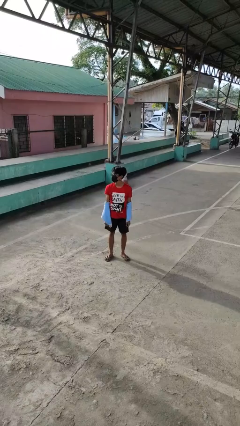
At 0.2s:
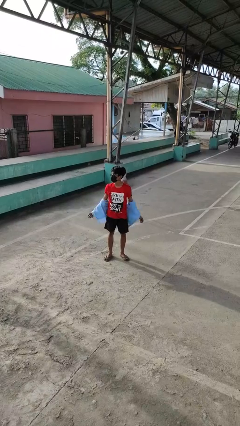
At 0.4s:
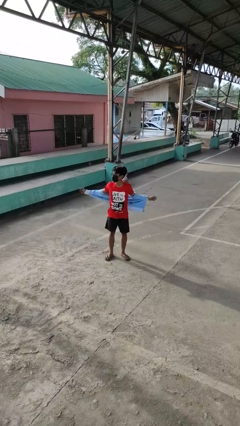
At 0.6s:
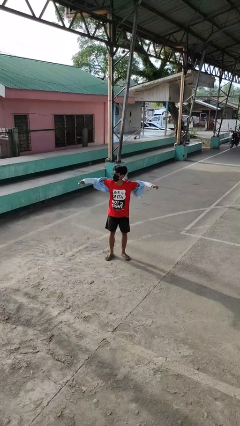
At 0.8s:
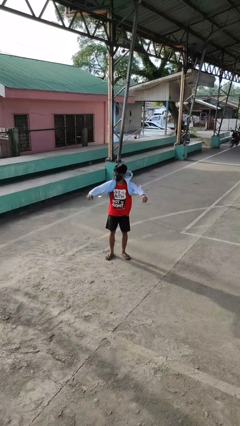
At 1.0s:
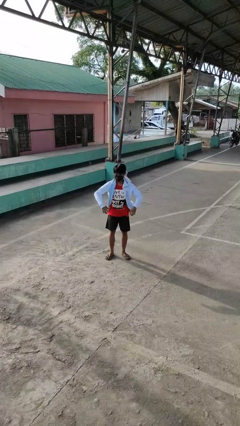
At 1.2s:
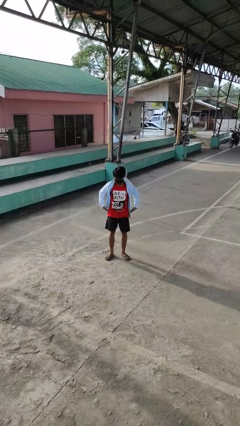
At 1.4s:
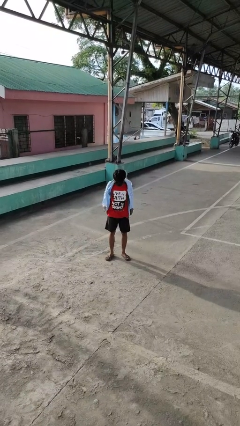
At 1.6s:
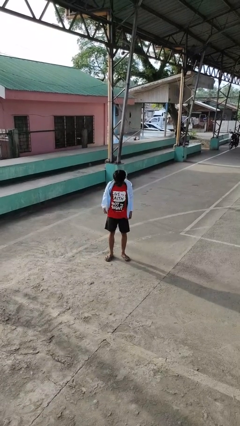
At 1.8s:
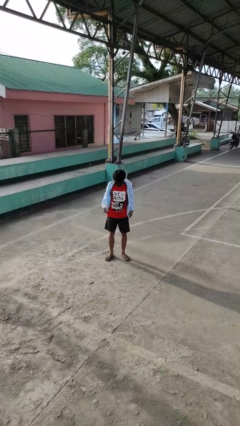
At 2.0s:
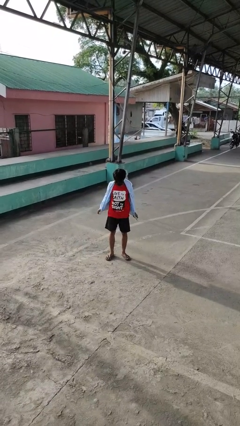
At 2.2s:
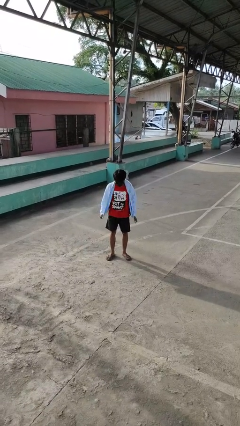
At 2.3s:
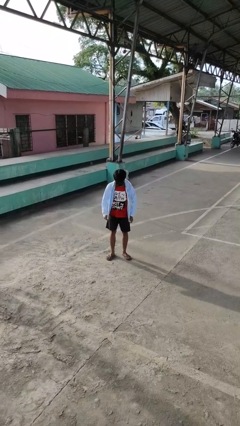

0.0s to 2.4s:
person puts on jacket

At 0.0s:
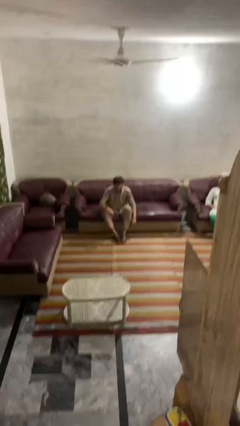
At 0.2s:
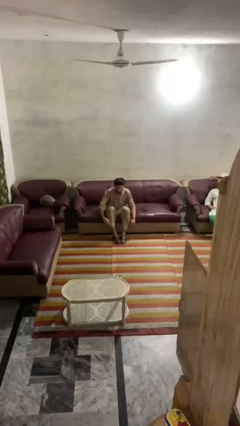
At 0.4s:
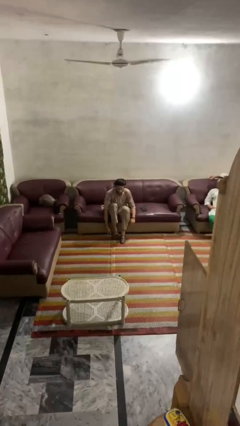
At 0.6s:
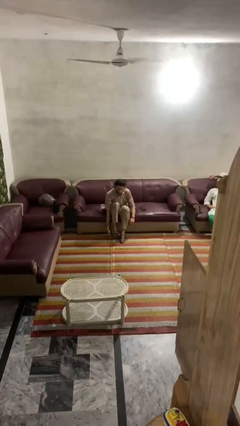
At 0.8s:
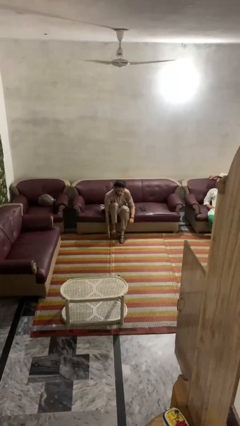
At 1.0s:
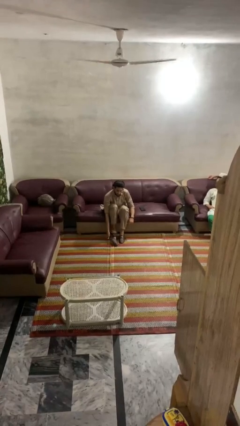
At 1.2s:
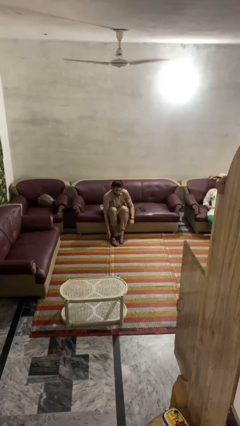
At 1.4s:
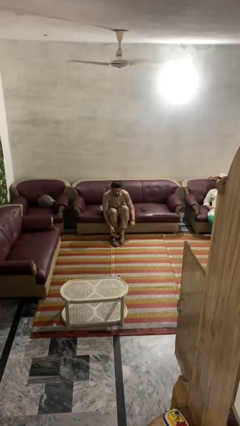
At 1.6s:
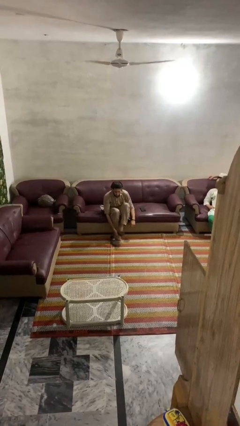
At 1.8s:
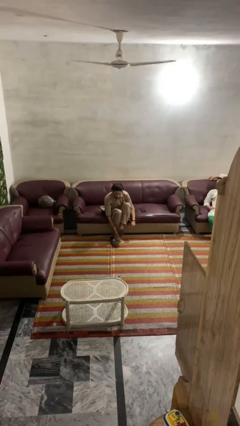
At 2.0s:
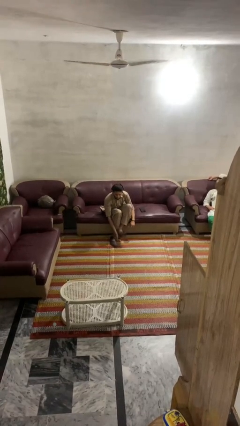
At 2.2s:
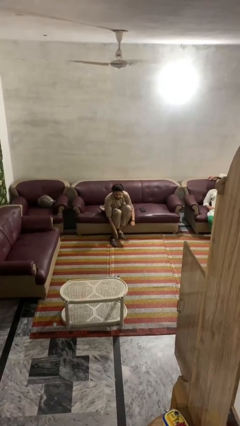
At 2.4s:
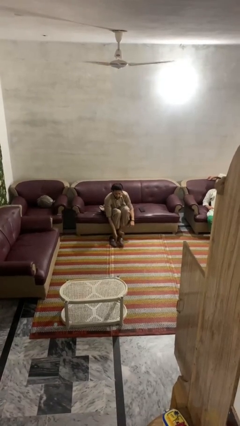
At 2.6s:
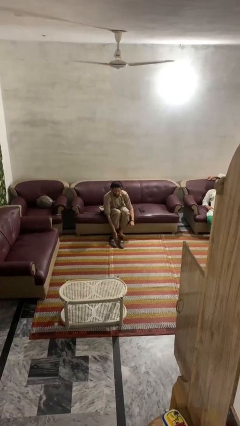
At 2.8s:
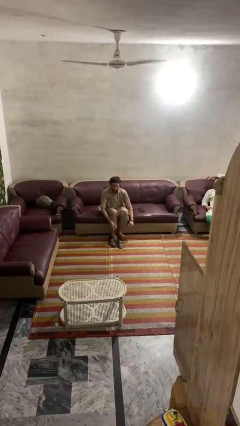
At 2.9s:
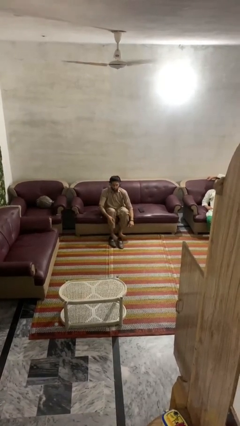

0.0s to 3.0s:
person takes off shoes

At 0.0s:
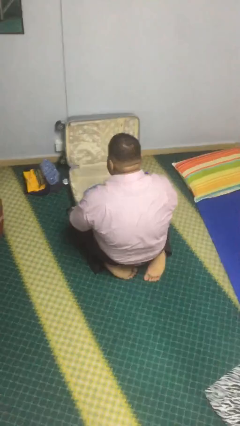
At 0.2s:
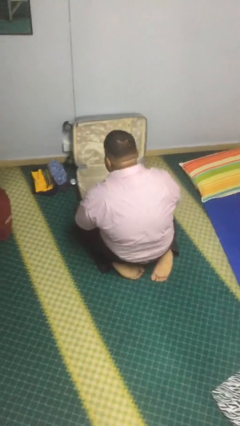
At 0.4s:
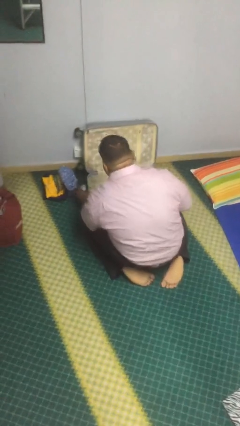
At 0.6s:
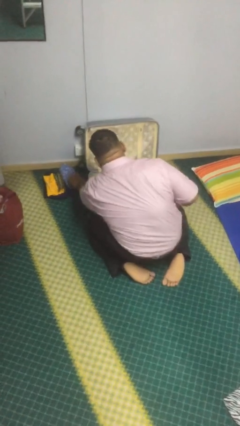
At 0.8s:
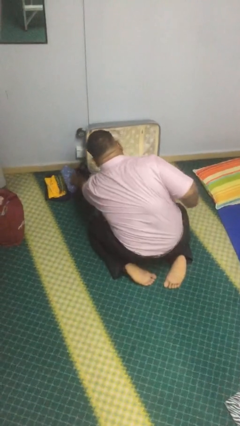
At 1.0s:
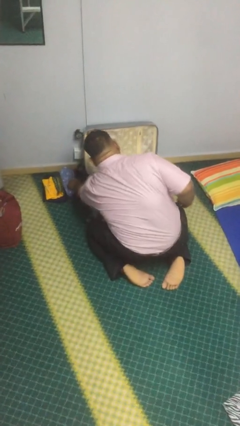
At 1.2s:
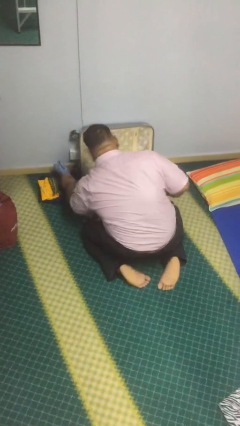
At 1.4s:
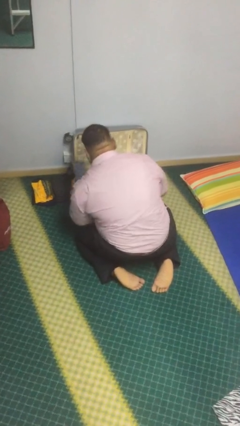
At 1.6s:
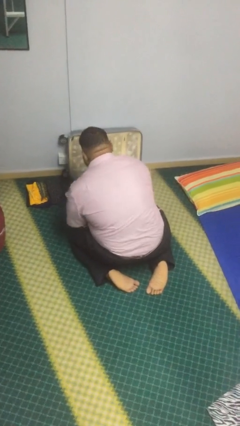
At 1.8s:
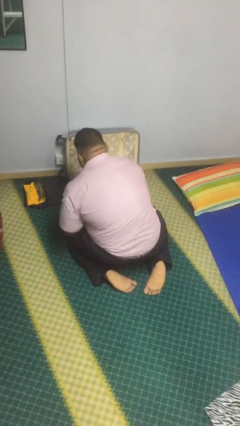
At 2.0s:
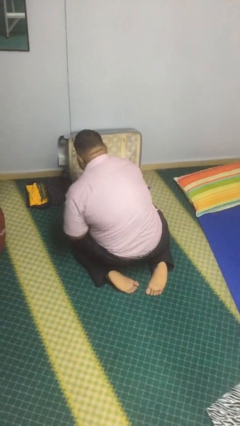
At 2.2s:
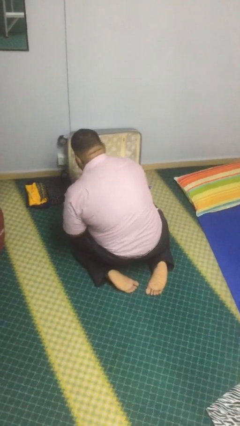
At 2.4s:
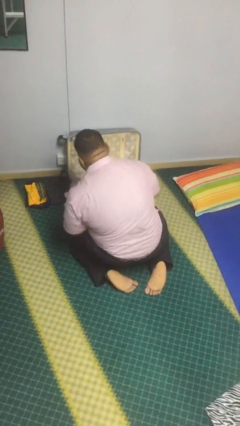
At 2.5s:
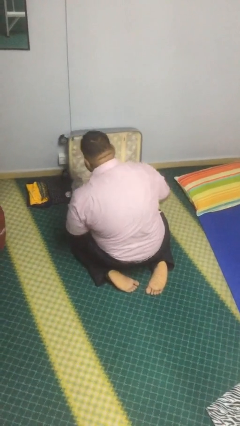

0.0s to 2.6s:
person loads clothes into suitcase

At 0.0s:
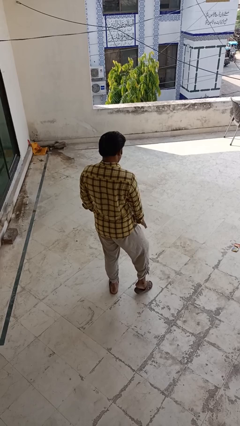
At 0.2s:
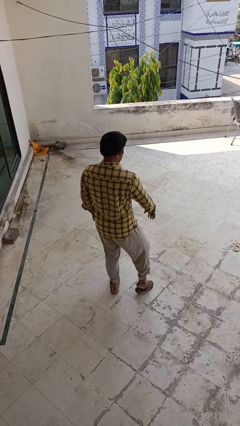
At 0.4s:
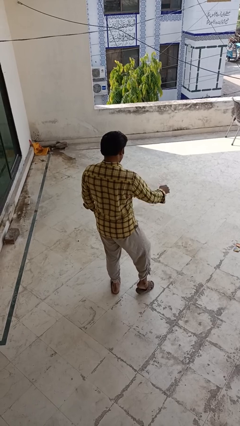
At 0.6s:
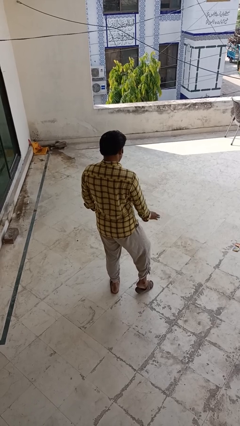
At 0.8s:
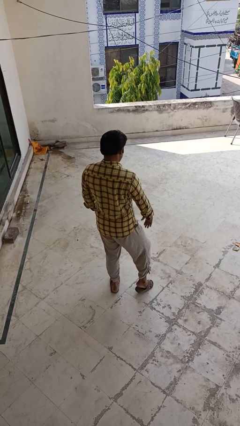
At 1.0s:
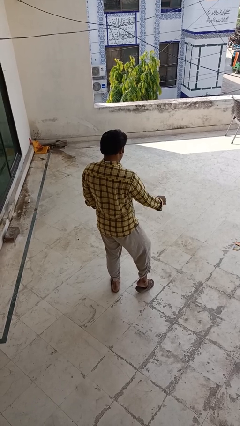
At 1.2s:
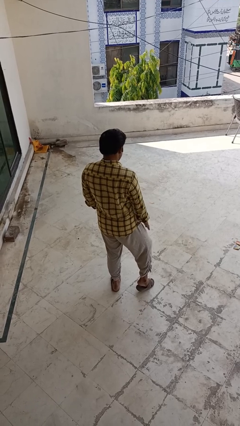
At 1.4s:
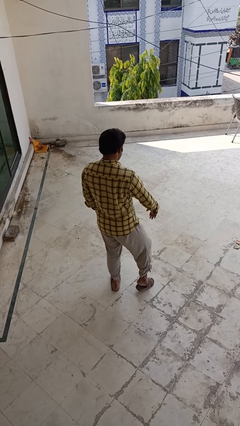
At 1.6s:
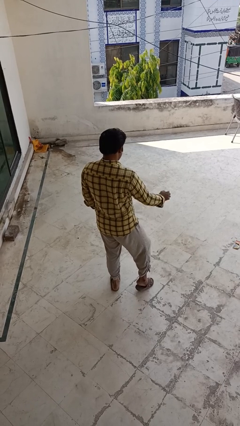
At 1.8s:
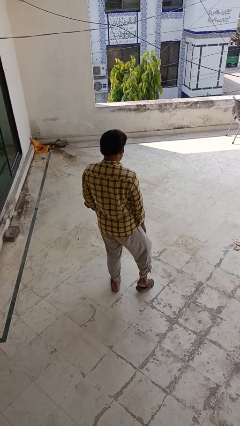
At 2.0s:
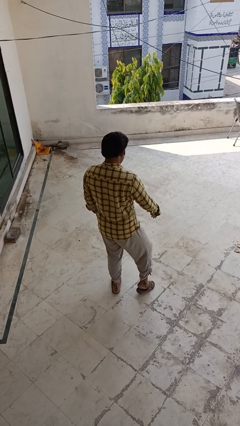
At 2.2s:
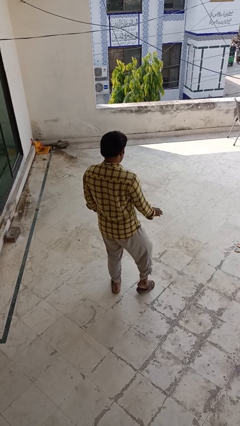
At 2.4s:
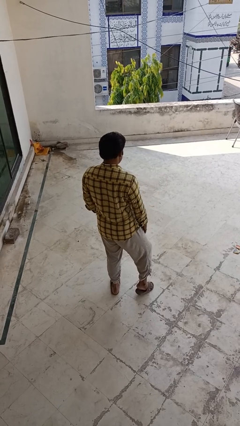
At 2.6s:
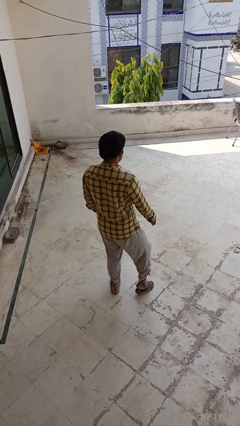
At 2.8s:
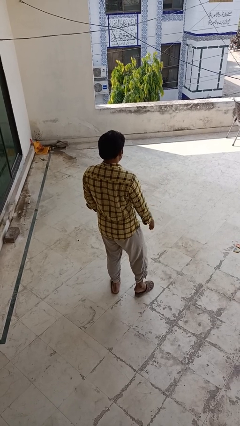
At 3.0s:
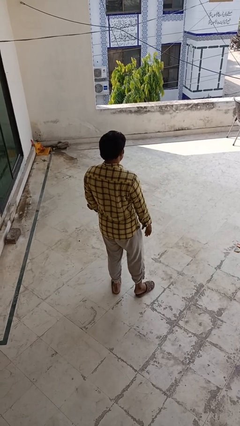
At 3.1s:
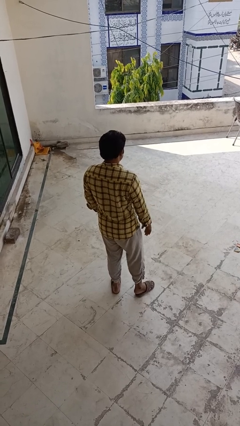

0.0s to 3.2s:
person slaps hands on thighs

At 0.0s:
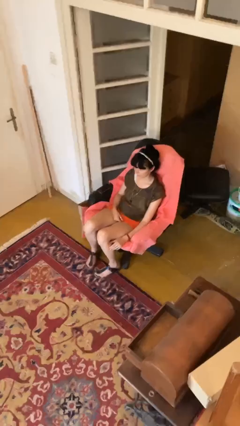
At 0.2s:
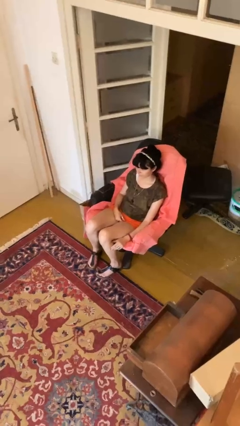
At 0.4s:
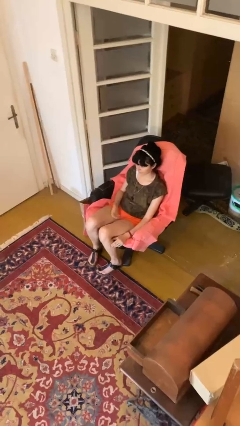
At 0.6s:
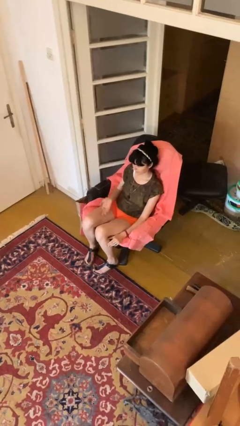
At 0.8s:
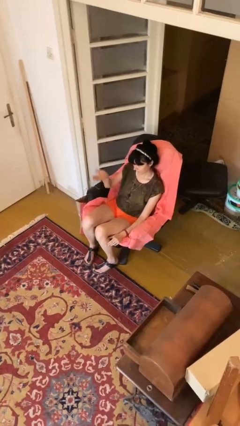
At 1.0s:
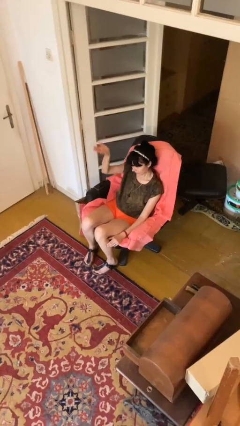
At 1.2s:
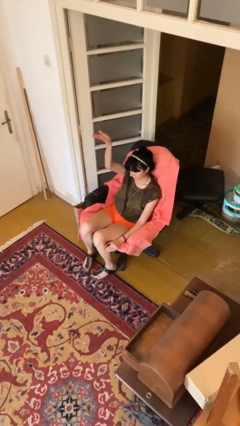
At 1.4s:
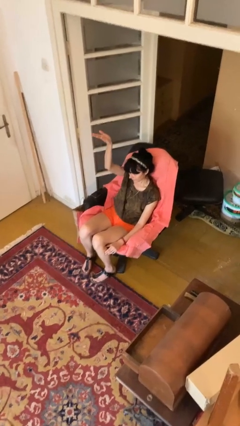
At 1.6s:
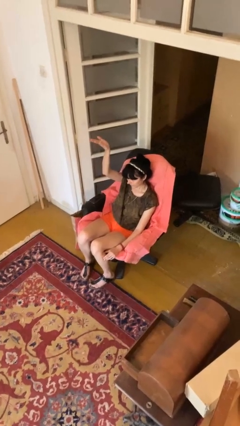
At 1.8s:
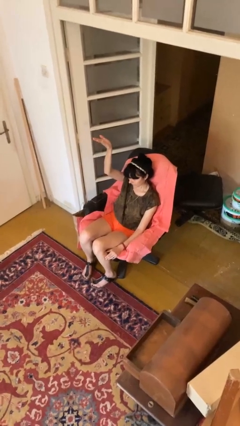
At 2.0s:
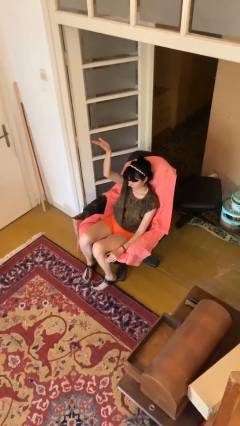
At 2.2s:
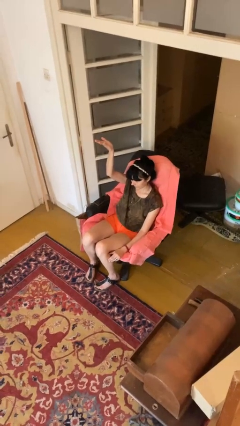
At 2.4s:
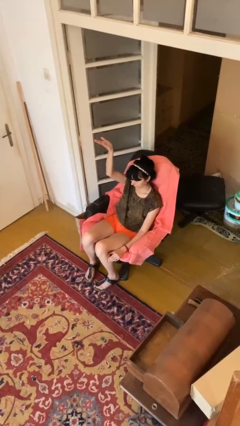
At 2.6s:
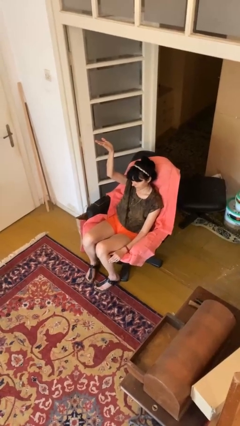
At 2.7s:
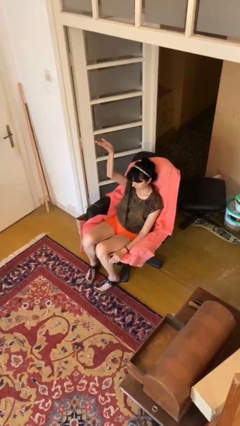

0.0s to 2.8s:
person gestures swipe up

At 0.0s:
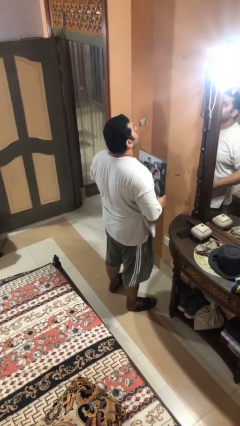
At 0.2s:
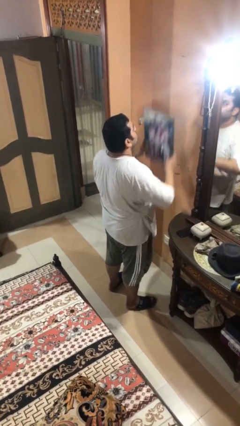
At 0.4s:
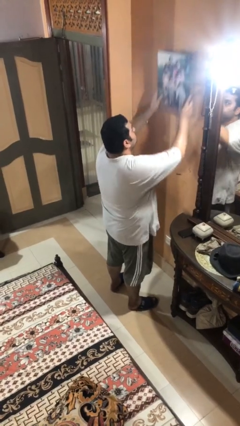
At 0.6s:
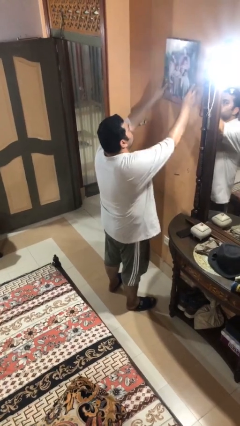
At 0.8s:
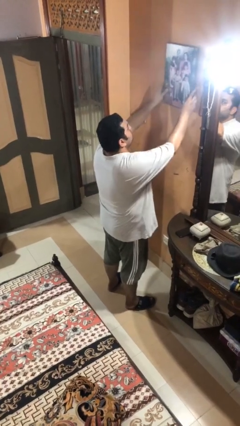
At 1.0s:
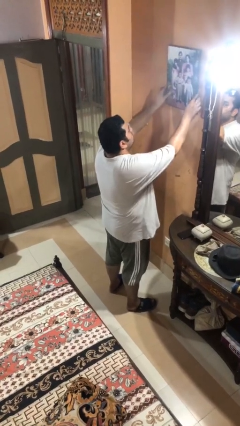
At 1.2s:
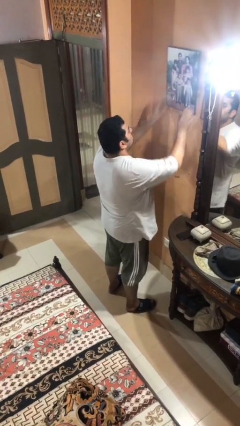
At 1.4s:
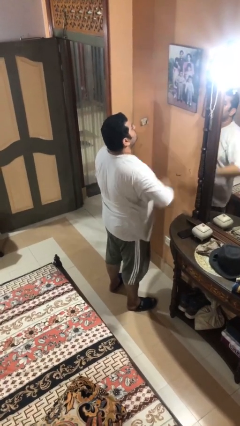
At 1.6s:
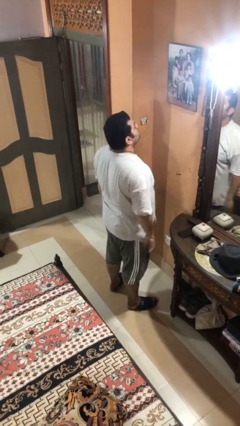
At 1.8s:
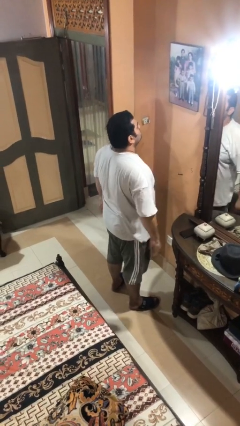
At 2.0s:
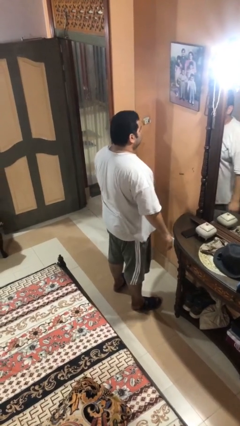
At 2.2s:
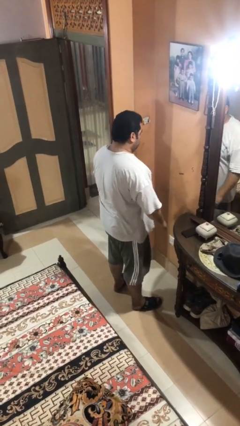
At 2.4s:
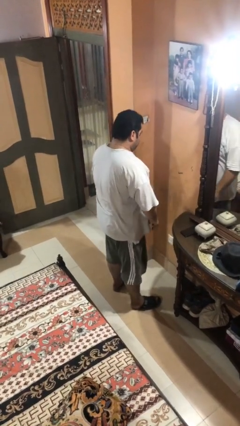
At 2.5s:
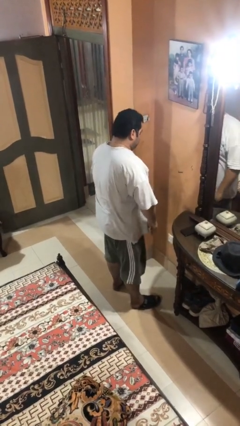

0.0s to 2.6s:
person puts up picture frame

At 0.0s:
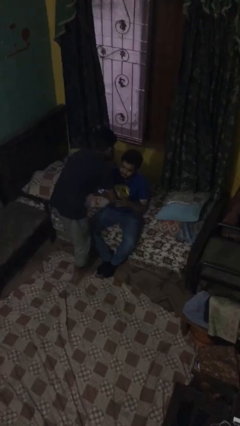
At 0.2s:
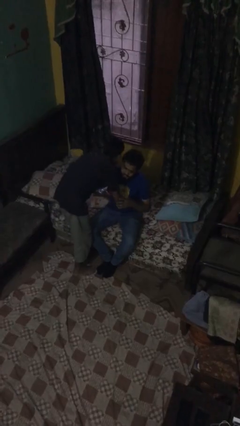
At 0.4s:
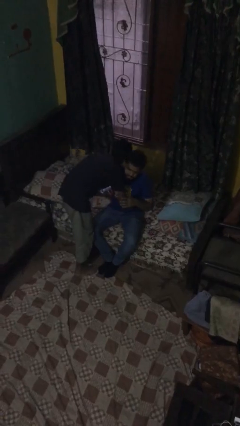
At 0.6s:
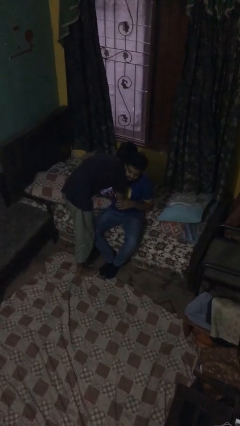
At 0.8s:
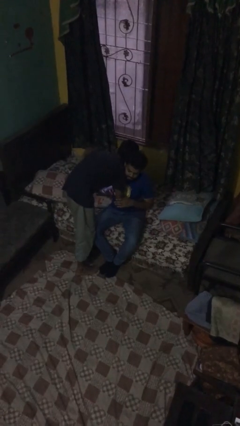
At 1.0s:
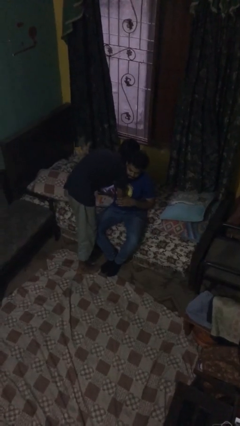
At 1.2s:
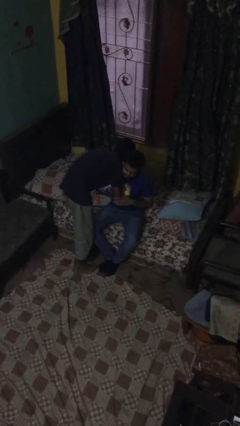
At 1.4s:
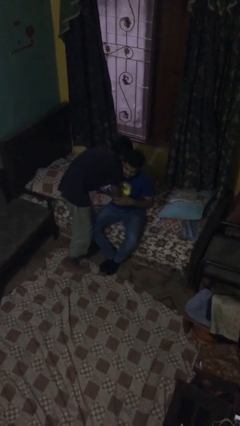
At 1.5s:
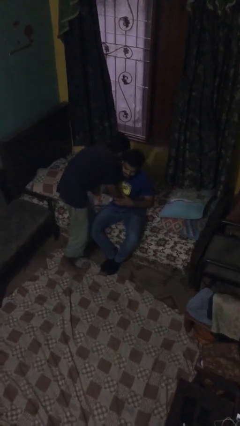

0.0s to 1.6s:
person embraces person
